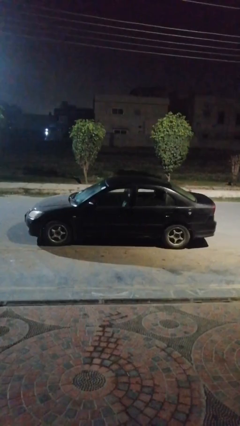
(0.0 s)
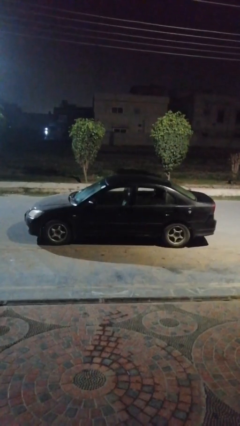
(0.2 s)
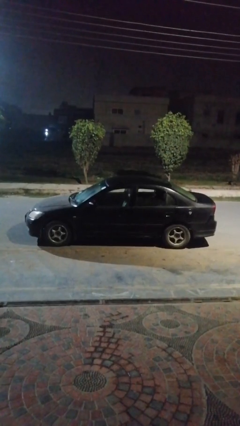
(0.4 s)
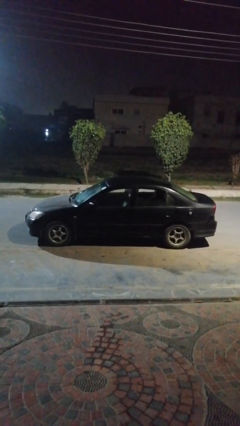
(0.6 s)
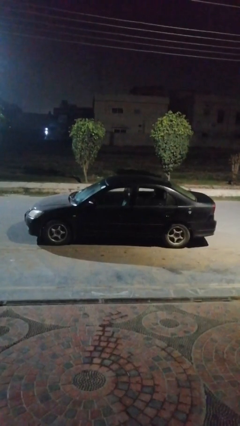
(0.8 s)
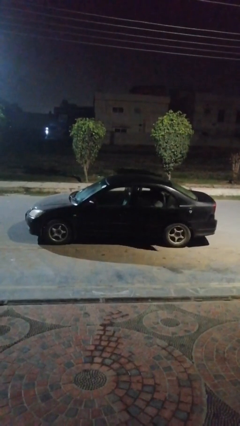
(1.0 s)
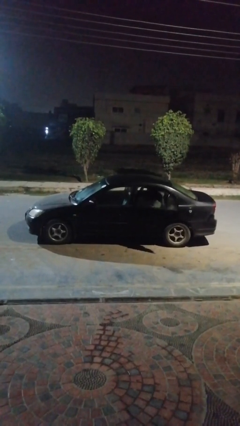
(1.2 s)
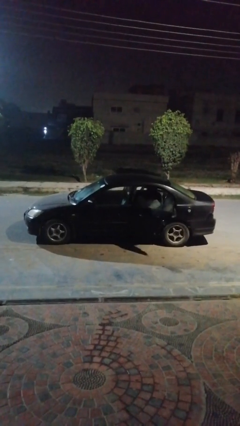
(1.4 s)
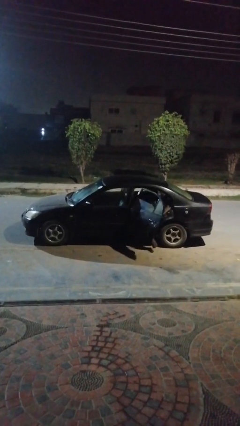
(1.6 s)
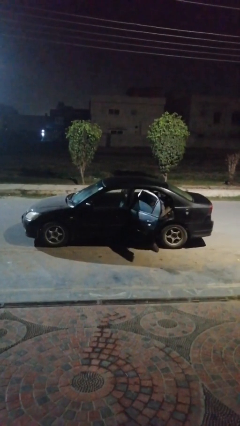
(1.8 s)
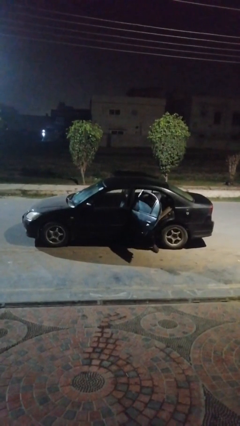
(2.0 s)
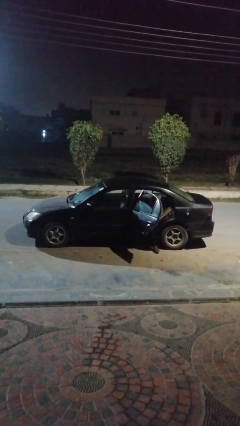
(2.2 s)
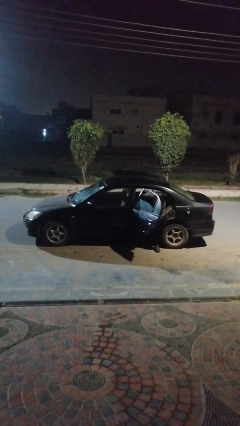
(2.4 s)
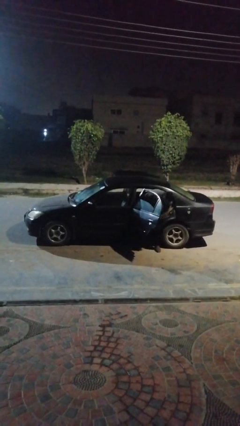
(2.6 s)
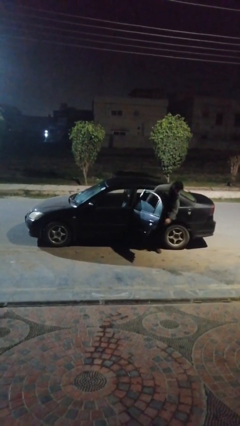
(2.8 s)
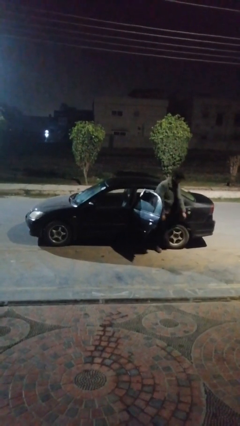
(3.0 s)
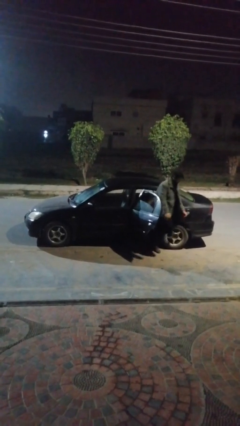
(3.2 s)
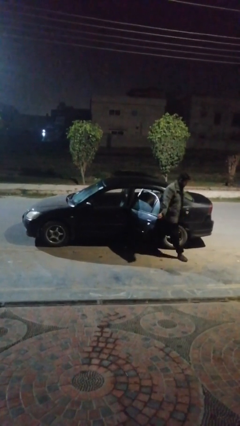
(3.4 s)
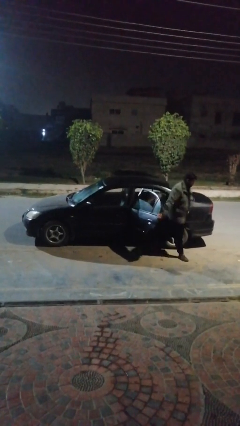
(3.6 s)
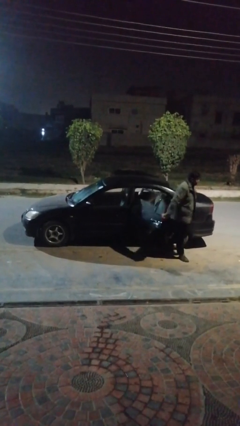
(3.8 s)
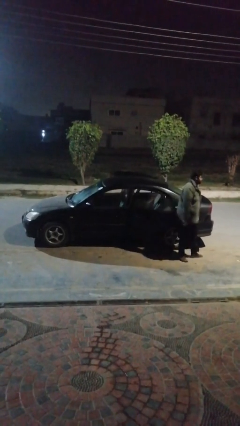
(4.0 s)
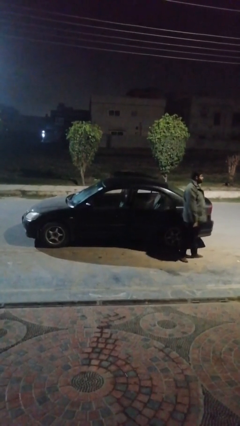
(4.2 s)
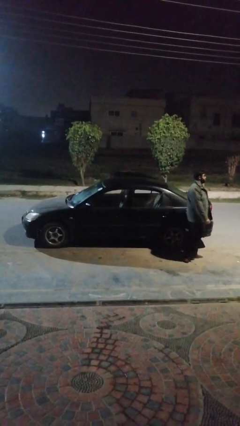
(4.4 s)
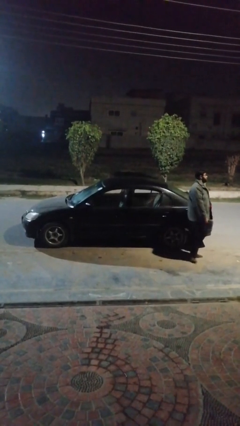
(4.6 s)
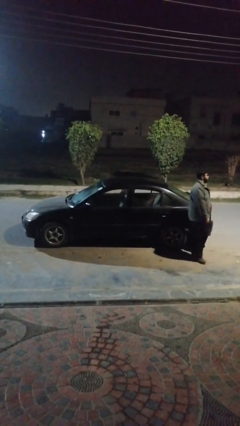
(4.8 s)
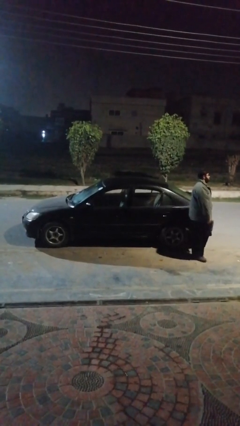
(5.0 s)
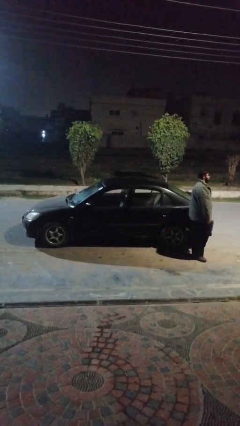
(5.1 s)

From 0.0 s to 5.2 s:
car drops off person

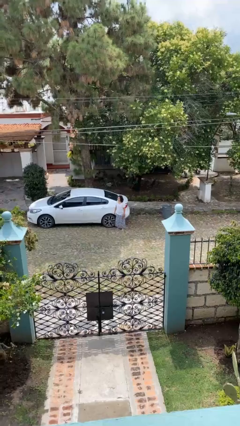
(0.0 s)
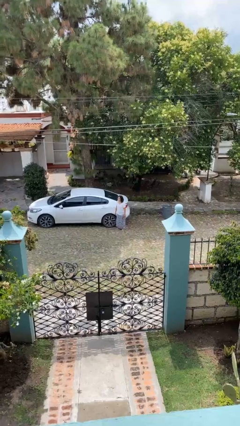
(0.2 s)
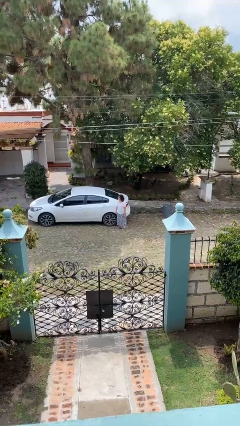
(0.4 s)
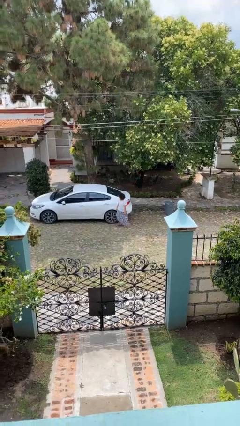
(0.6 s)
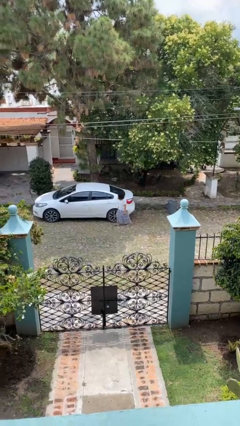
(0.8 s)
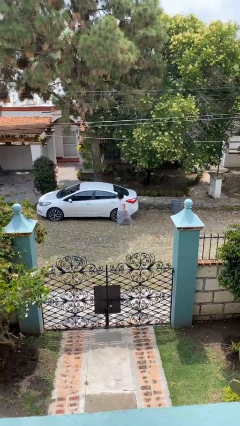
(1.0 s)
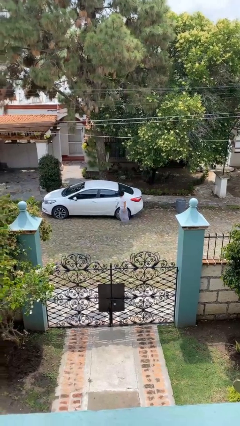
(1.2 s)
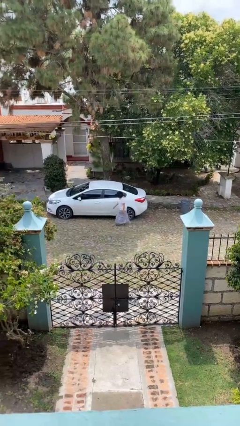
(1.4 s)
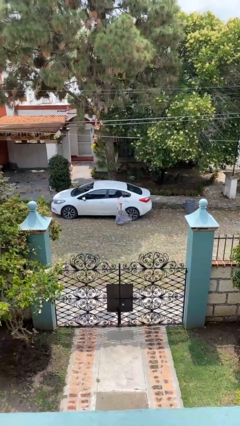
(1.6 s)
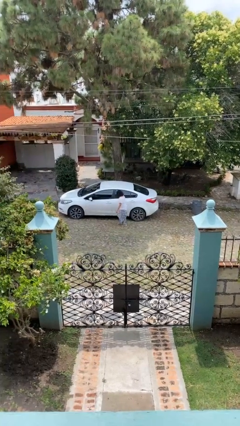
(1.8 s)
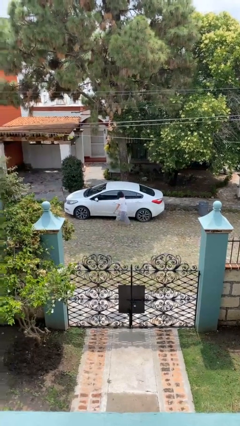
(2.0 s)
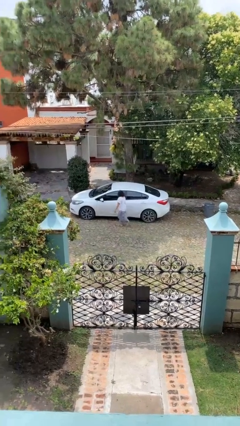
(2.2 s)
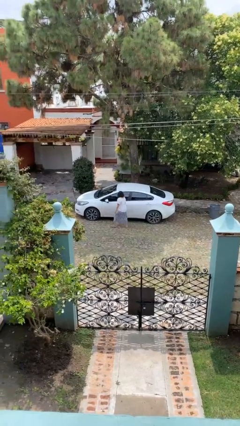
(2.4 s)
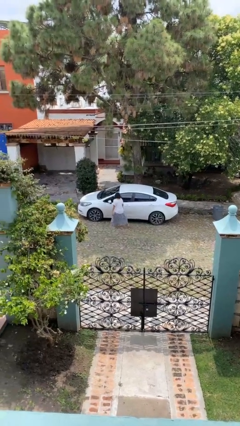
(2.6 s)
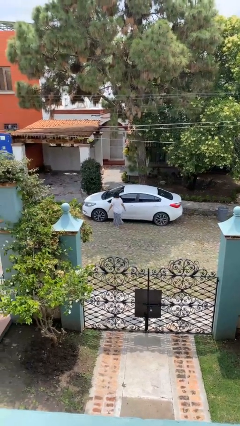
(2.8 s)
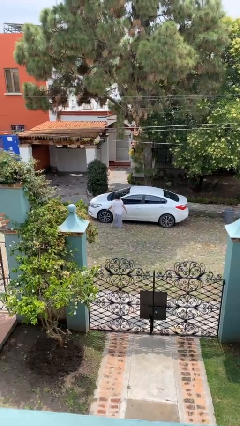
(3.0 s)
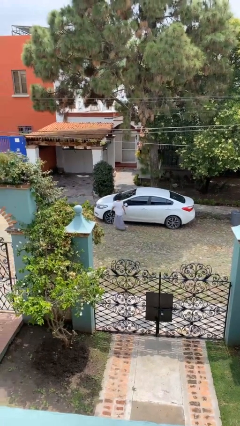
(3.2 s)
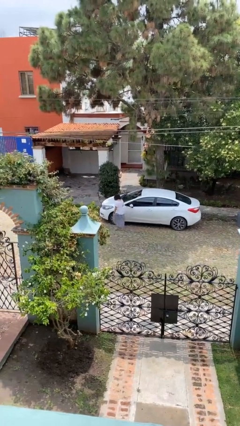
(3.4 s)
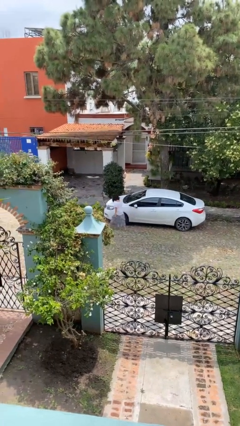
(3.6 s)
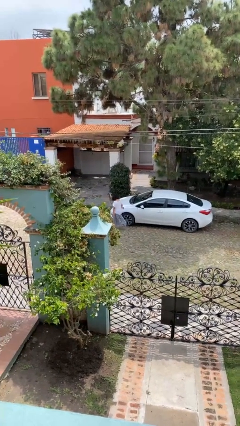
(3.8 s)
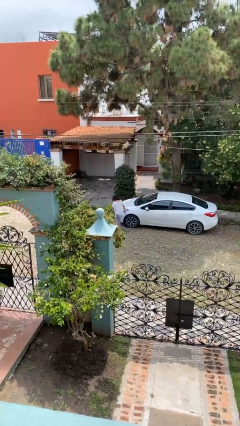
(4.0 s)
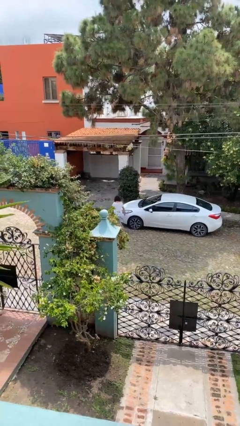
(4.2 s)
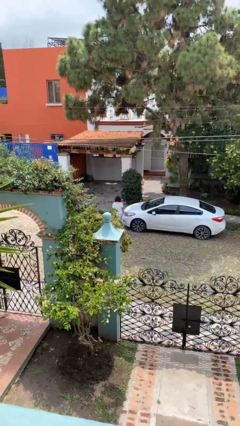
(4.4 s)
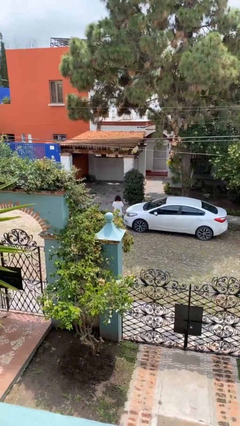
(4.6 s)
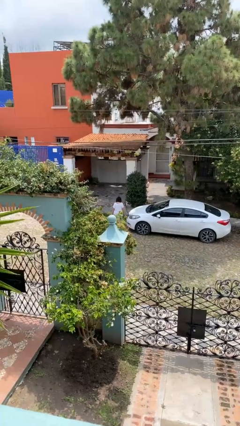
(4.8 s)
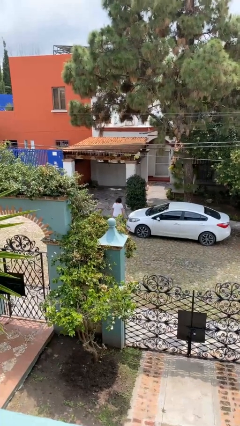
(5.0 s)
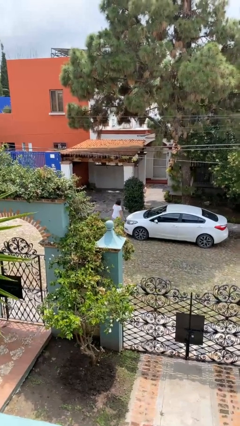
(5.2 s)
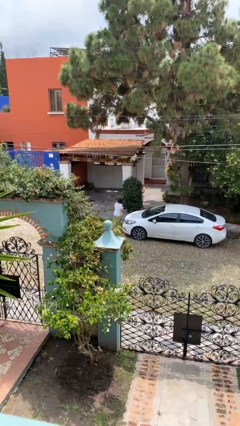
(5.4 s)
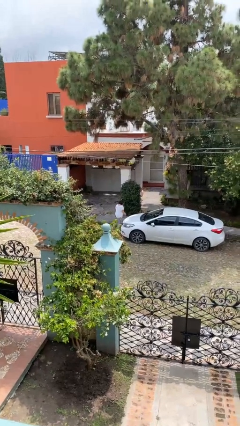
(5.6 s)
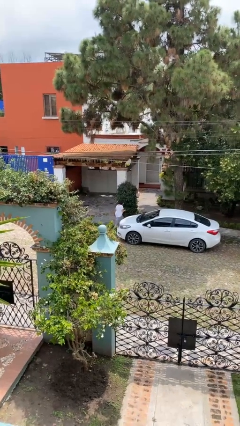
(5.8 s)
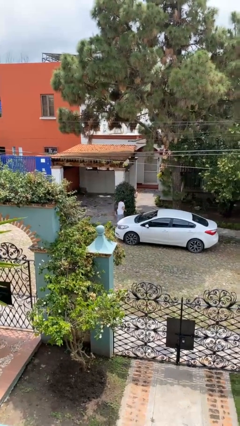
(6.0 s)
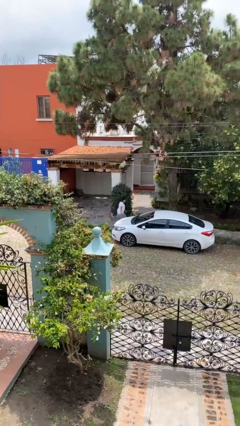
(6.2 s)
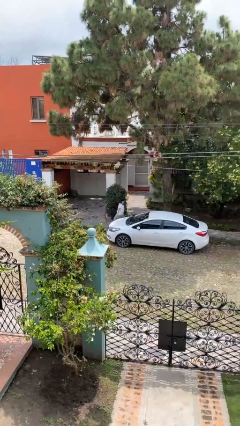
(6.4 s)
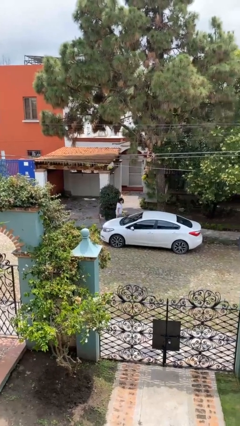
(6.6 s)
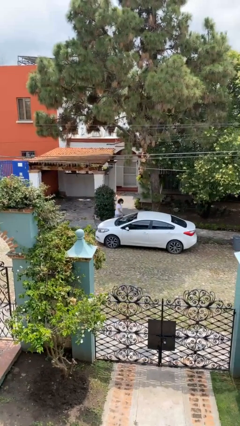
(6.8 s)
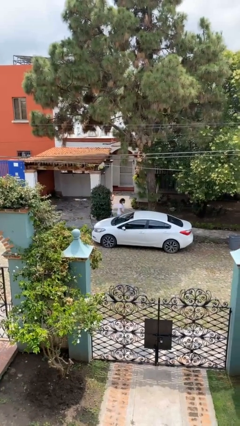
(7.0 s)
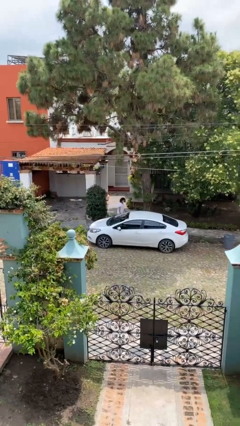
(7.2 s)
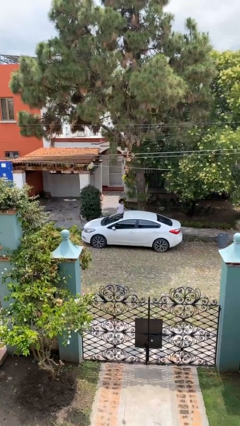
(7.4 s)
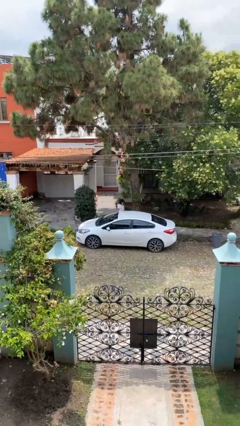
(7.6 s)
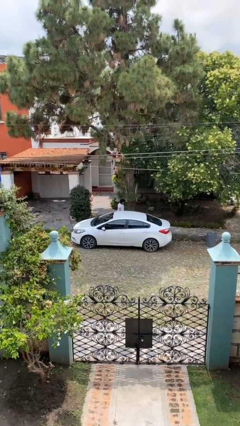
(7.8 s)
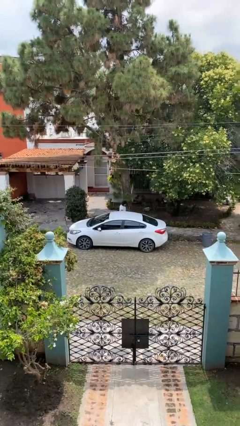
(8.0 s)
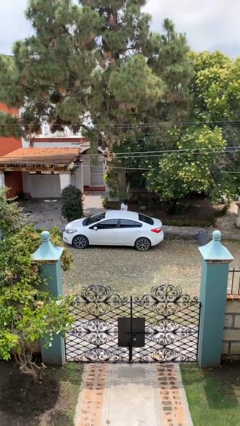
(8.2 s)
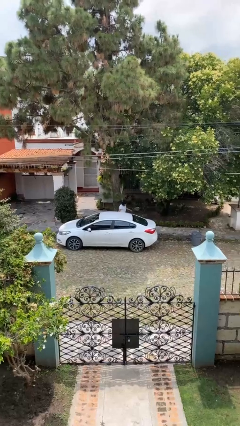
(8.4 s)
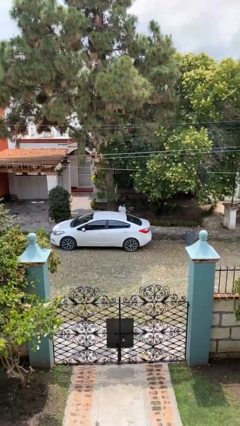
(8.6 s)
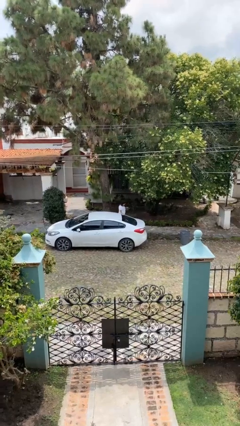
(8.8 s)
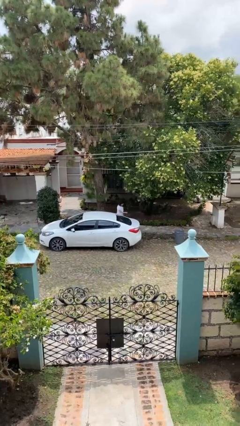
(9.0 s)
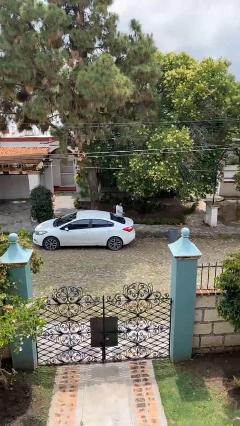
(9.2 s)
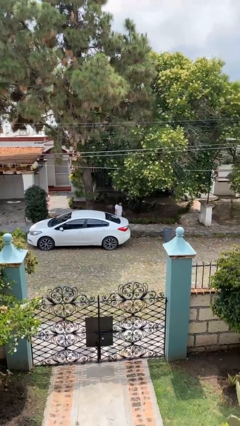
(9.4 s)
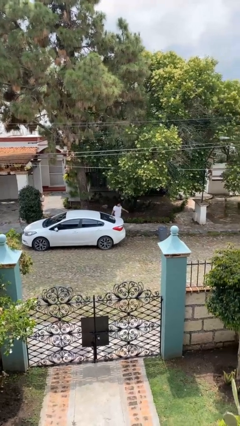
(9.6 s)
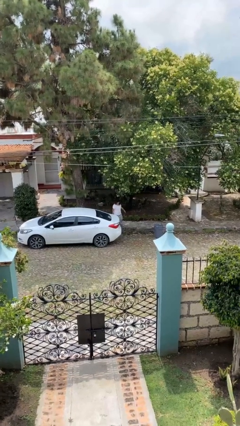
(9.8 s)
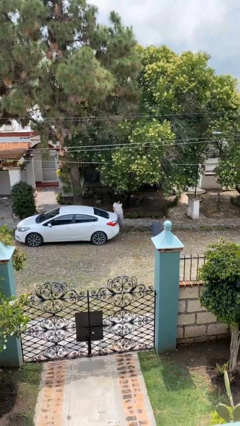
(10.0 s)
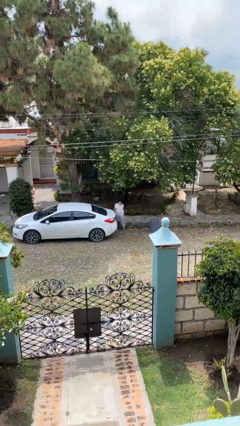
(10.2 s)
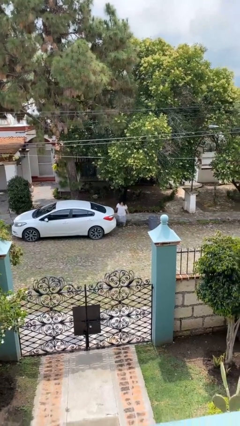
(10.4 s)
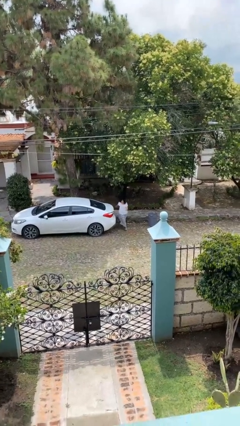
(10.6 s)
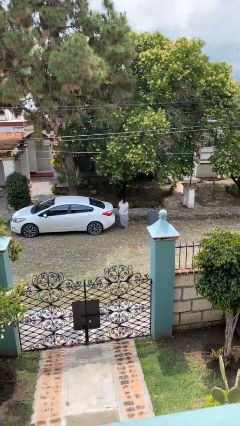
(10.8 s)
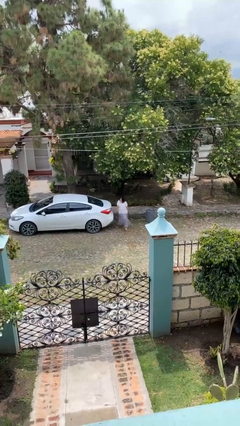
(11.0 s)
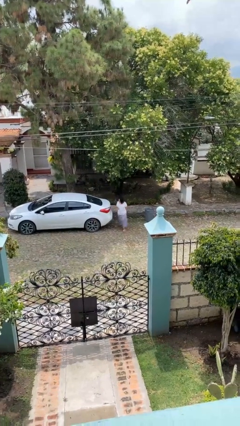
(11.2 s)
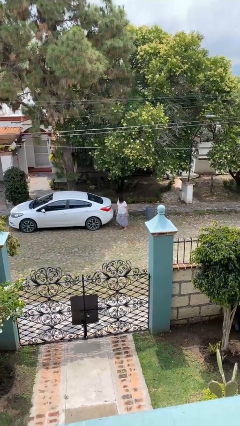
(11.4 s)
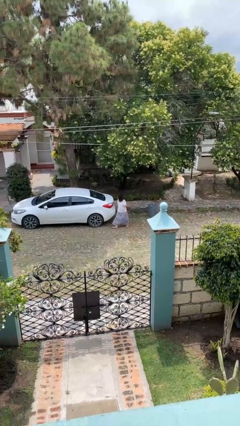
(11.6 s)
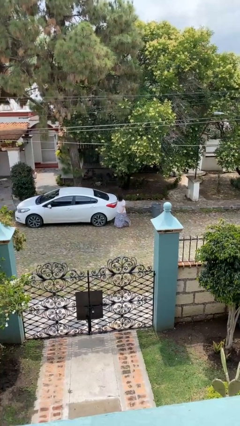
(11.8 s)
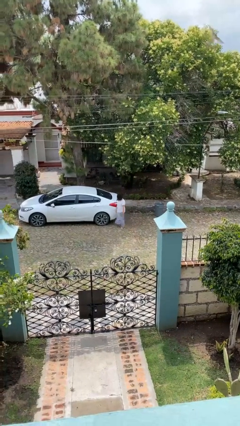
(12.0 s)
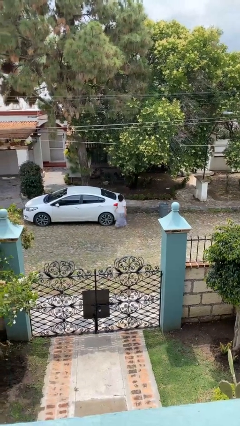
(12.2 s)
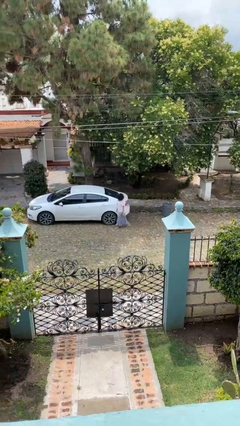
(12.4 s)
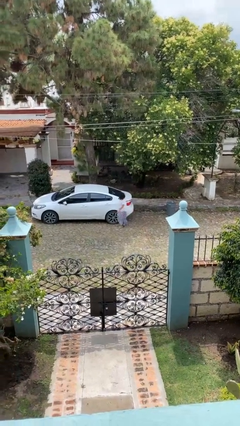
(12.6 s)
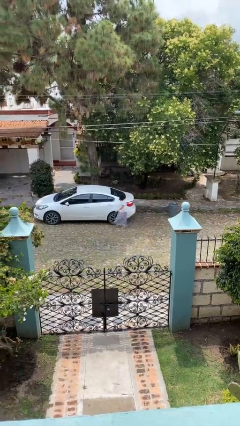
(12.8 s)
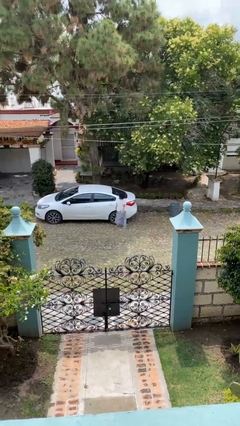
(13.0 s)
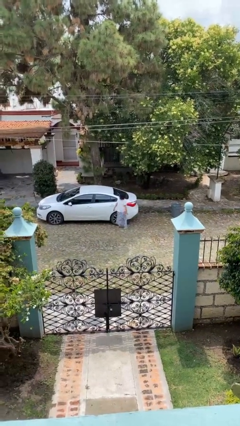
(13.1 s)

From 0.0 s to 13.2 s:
person walks around car
